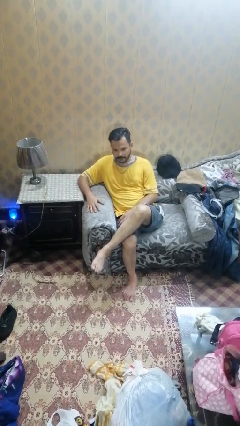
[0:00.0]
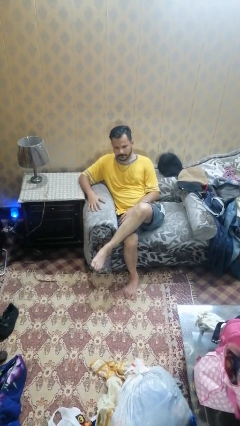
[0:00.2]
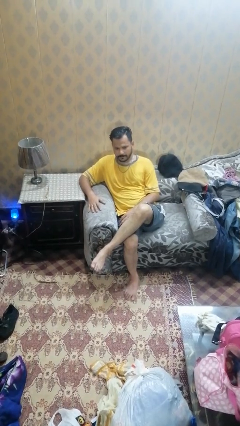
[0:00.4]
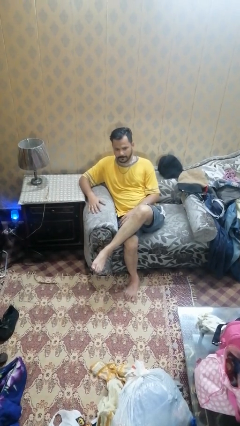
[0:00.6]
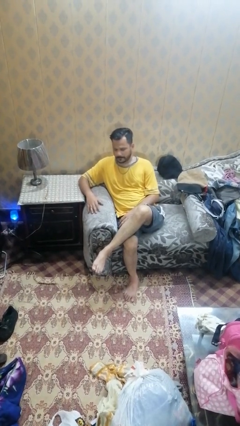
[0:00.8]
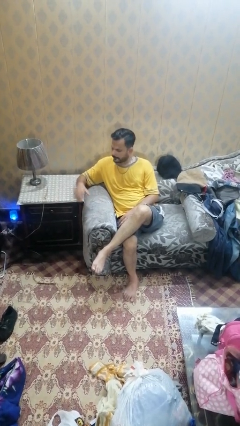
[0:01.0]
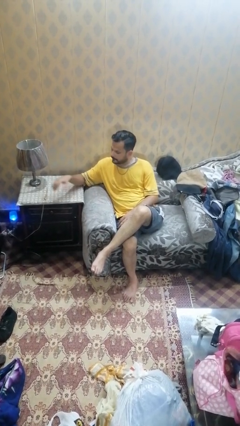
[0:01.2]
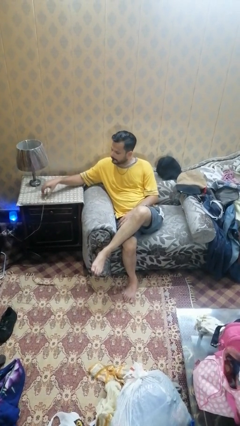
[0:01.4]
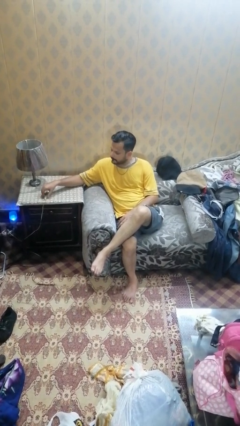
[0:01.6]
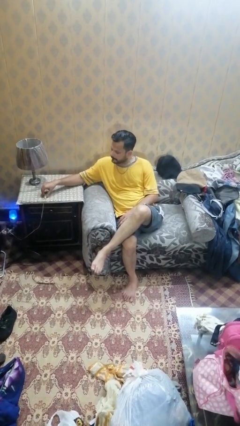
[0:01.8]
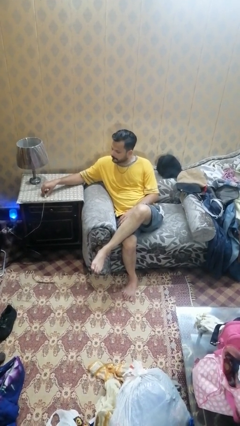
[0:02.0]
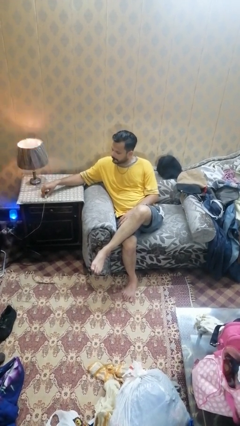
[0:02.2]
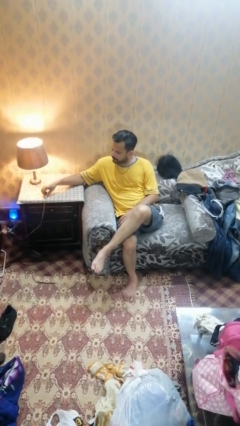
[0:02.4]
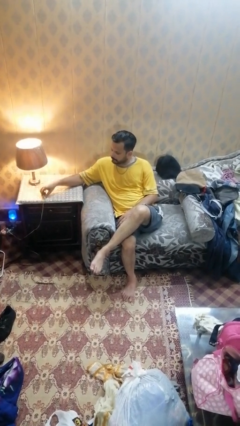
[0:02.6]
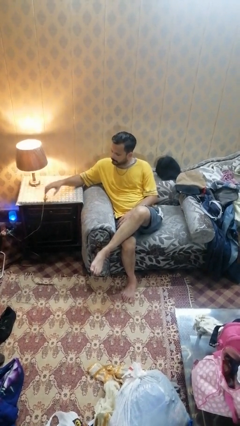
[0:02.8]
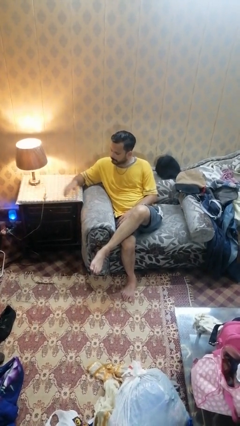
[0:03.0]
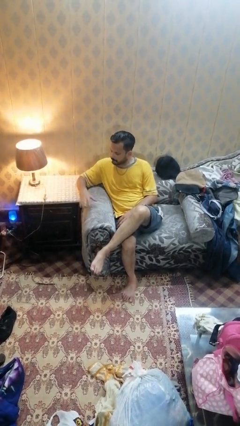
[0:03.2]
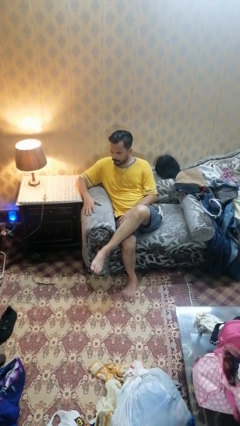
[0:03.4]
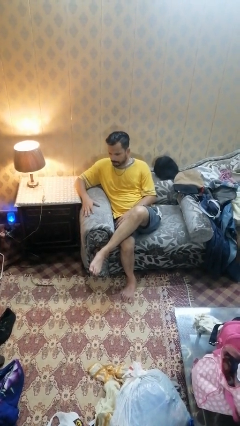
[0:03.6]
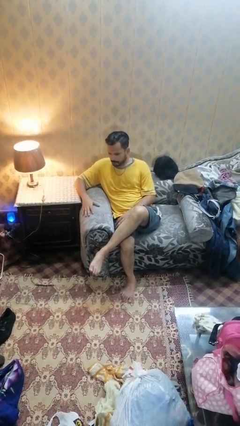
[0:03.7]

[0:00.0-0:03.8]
person turns on lamp

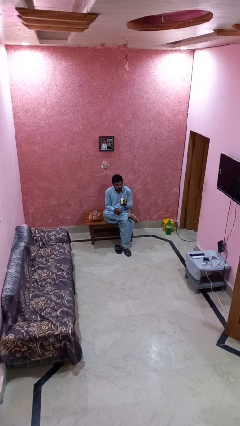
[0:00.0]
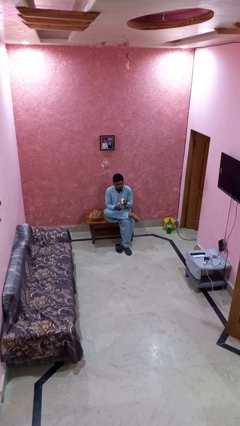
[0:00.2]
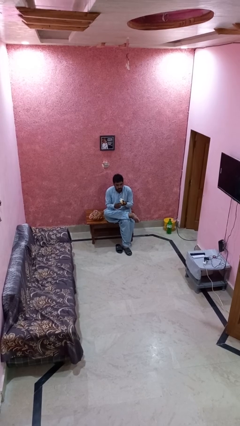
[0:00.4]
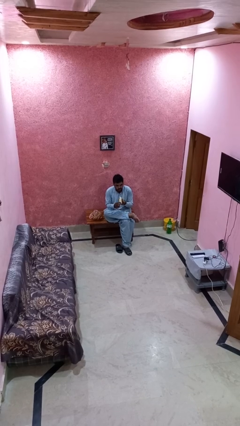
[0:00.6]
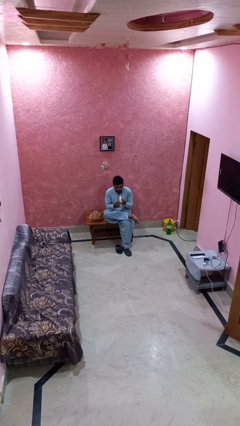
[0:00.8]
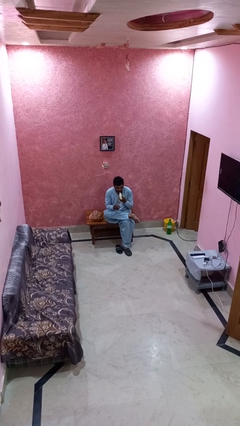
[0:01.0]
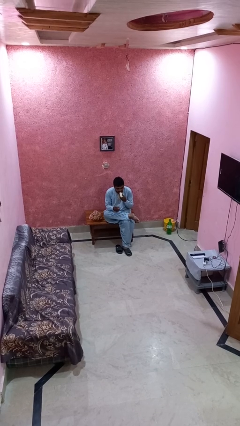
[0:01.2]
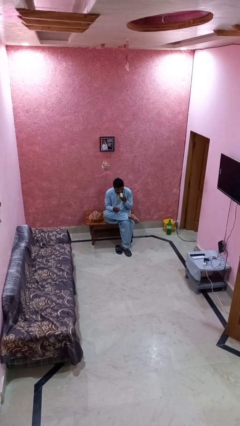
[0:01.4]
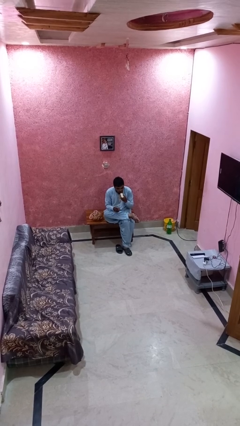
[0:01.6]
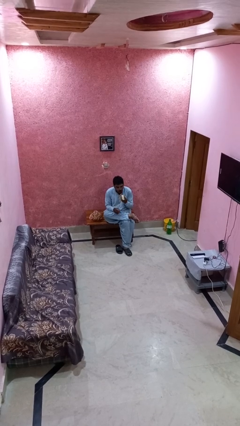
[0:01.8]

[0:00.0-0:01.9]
person eats banana

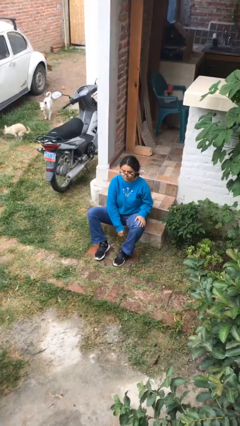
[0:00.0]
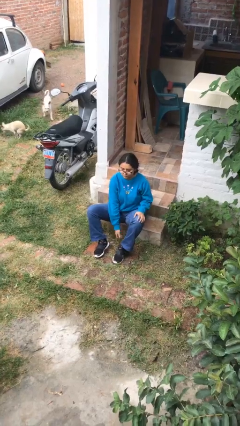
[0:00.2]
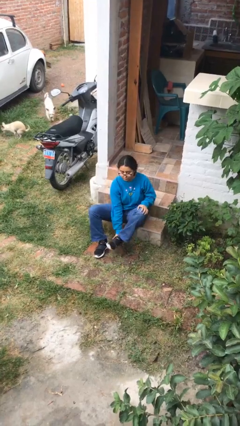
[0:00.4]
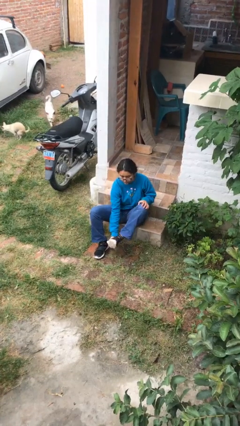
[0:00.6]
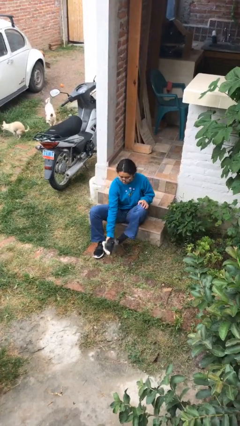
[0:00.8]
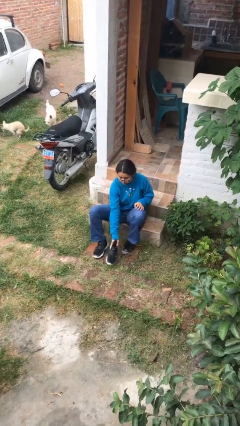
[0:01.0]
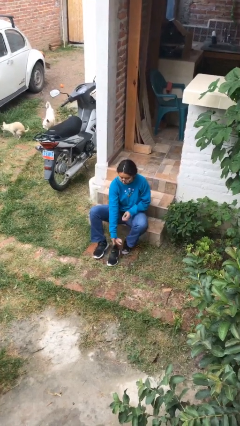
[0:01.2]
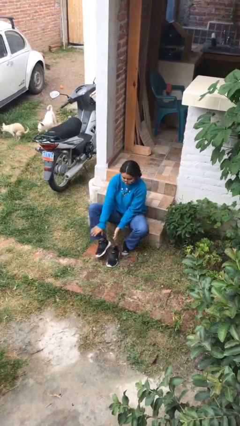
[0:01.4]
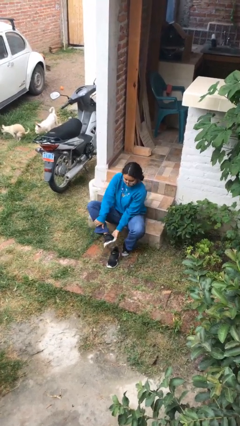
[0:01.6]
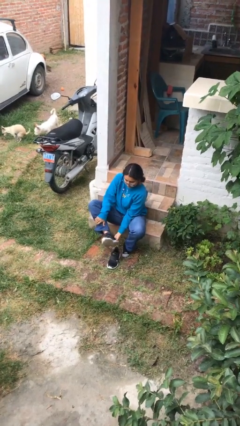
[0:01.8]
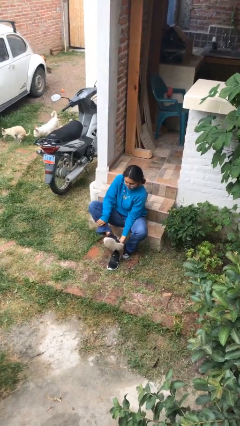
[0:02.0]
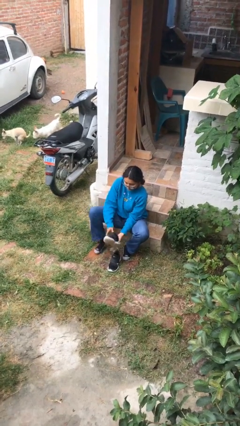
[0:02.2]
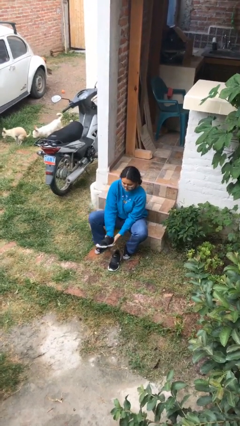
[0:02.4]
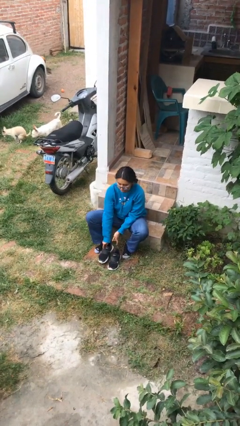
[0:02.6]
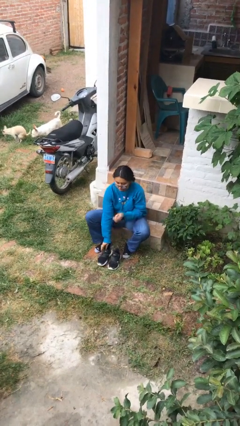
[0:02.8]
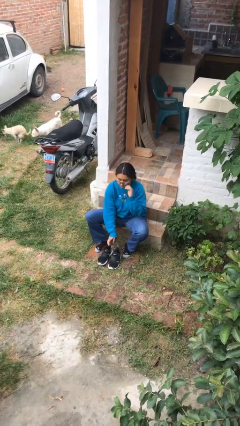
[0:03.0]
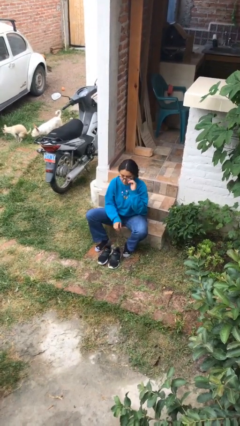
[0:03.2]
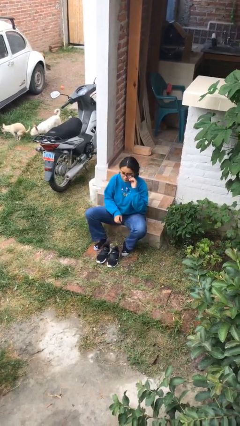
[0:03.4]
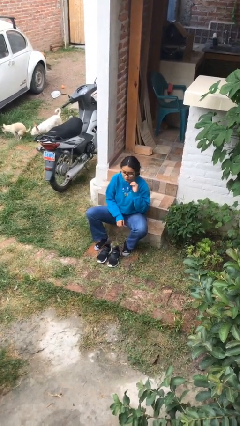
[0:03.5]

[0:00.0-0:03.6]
person takes off shoes

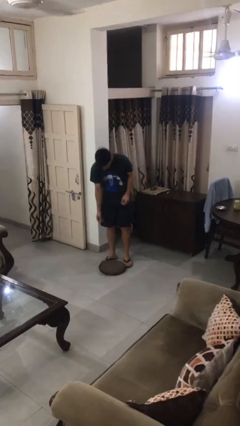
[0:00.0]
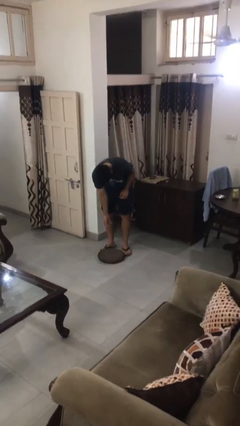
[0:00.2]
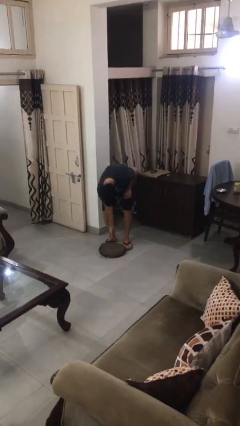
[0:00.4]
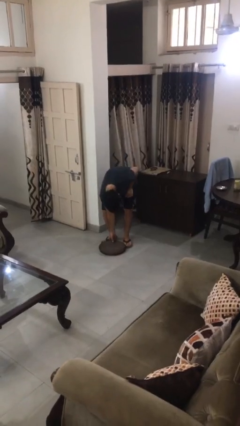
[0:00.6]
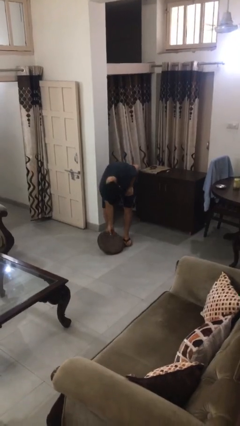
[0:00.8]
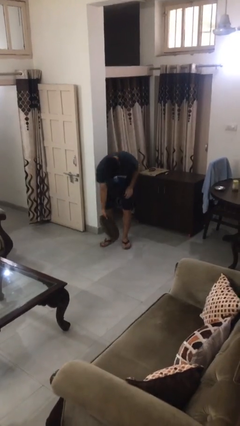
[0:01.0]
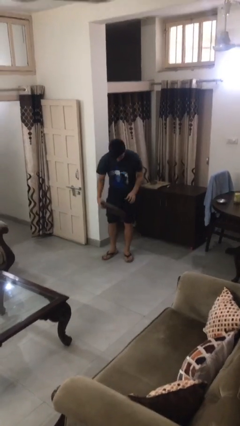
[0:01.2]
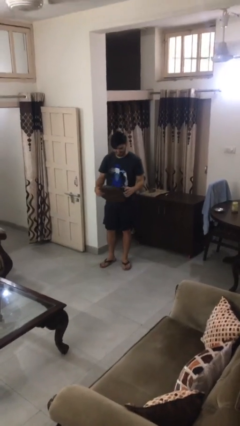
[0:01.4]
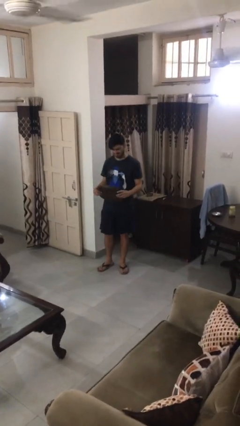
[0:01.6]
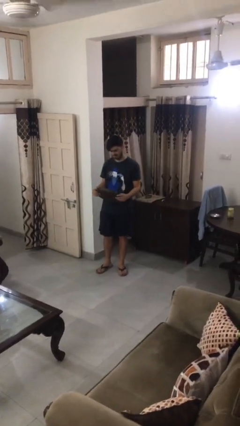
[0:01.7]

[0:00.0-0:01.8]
person picks up object from floor

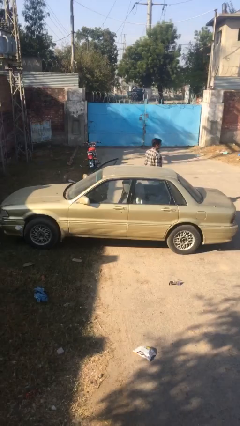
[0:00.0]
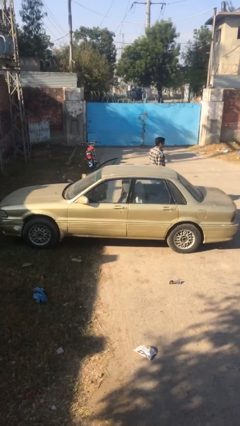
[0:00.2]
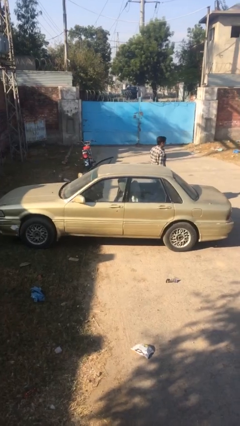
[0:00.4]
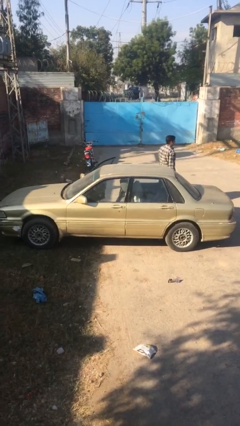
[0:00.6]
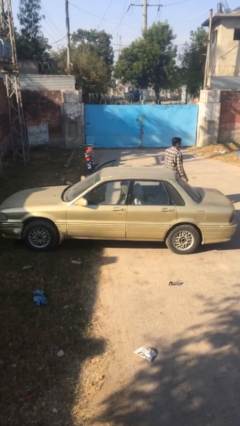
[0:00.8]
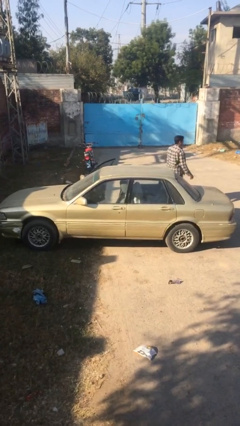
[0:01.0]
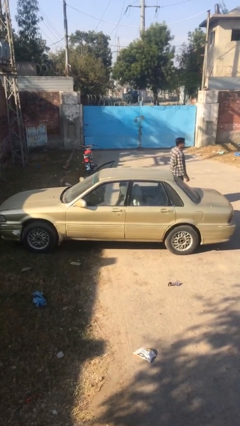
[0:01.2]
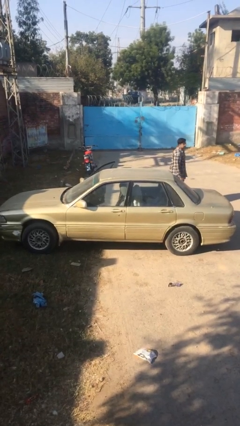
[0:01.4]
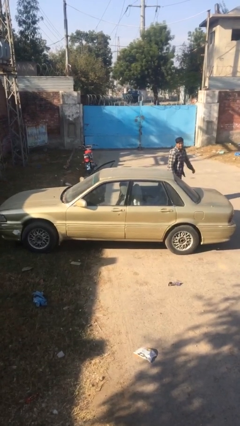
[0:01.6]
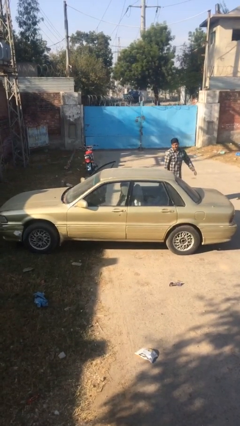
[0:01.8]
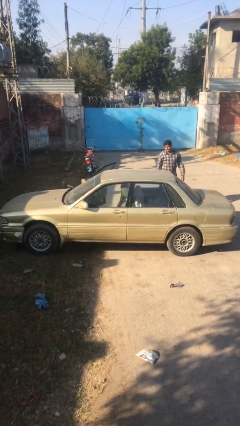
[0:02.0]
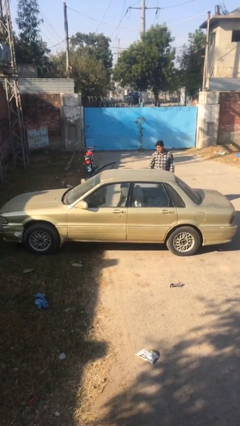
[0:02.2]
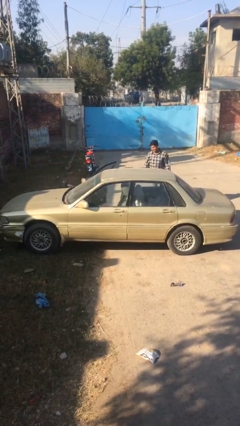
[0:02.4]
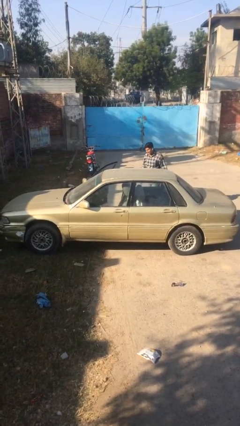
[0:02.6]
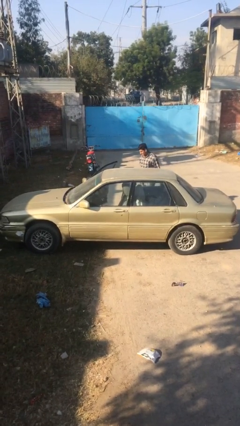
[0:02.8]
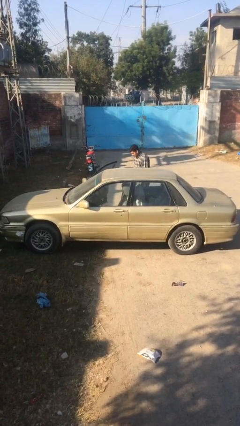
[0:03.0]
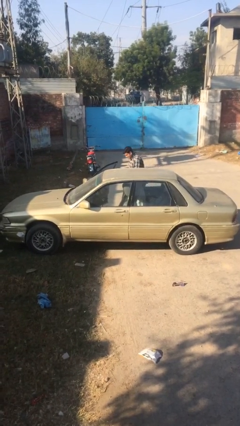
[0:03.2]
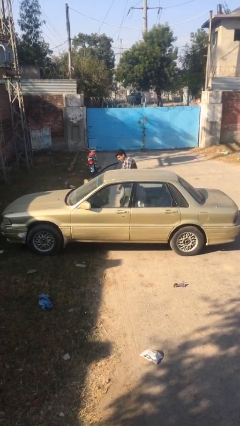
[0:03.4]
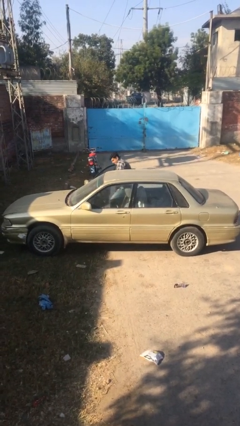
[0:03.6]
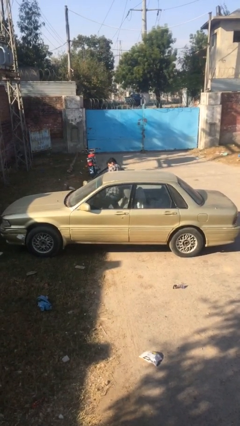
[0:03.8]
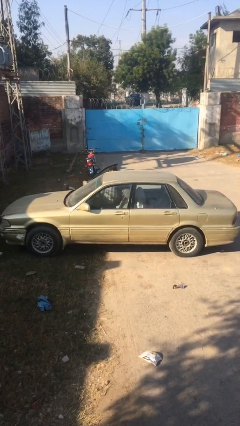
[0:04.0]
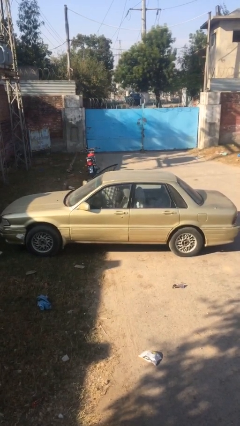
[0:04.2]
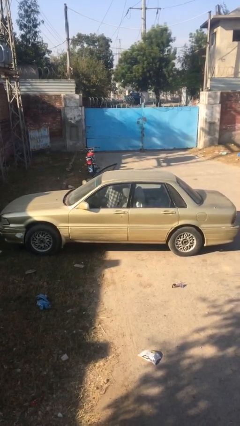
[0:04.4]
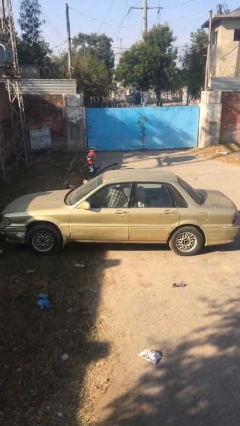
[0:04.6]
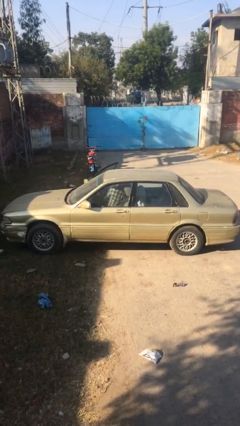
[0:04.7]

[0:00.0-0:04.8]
person enters car

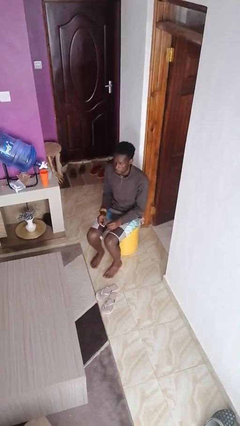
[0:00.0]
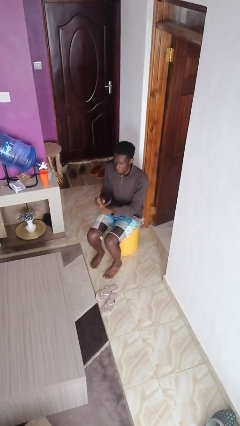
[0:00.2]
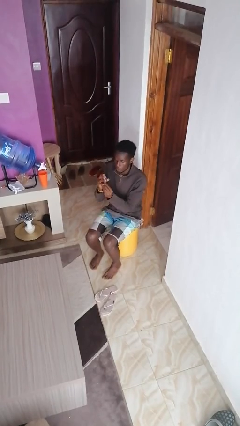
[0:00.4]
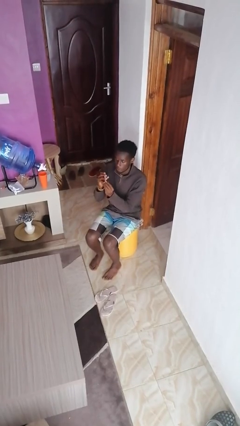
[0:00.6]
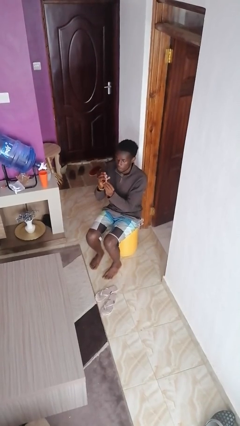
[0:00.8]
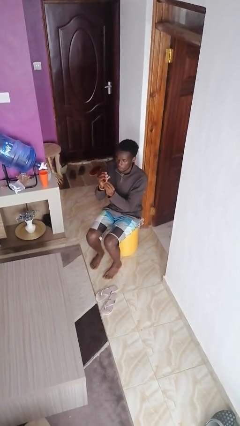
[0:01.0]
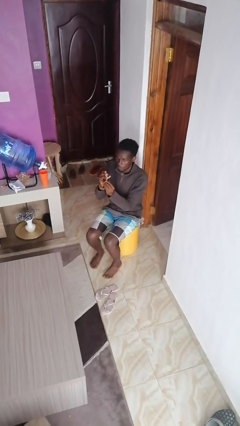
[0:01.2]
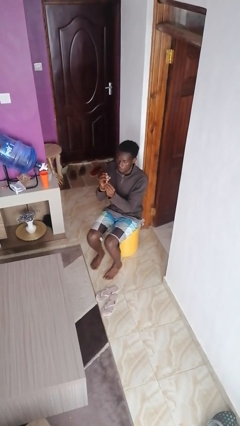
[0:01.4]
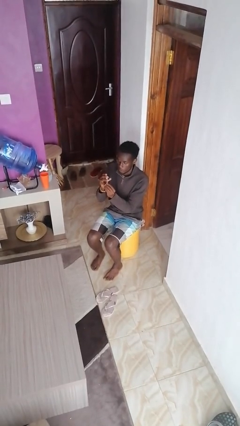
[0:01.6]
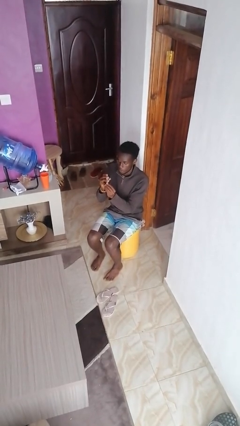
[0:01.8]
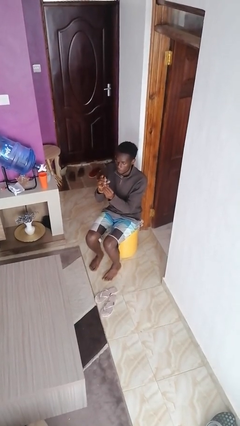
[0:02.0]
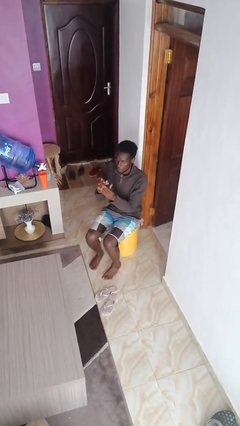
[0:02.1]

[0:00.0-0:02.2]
person clips fingernails
